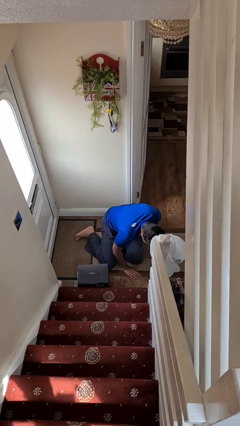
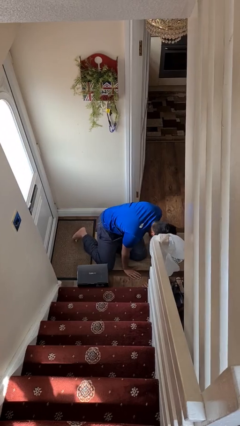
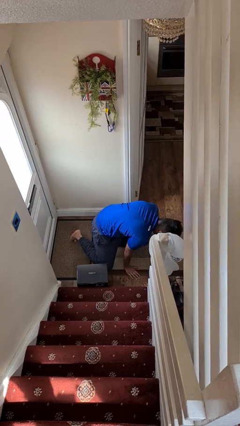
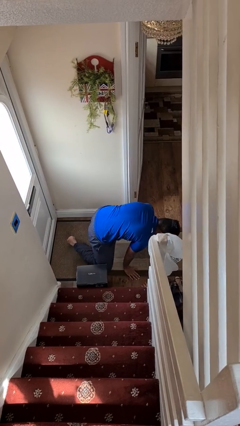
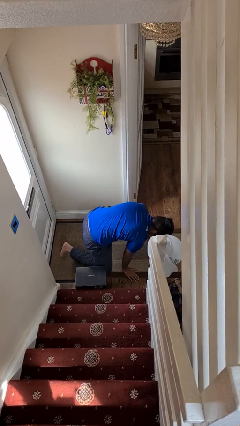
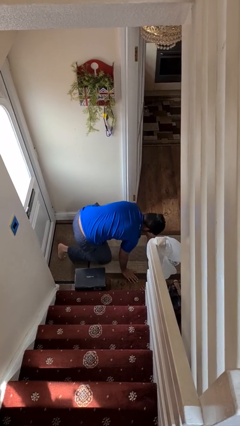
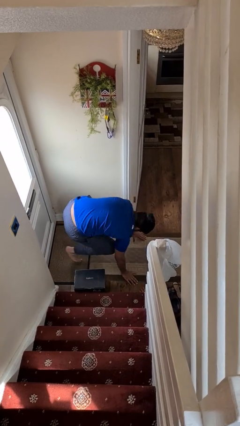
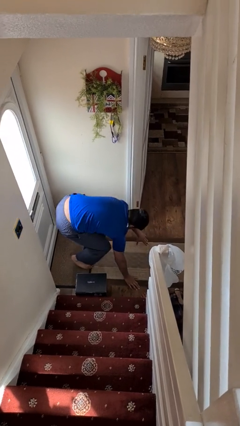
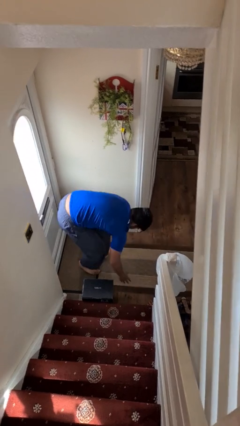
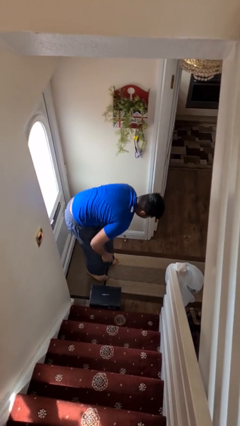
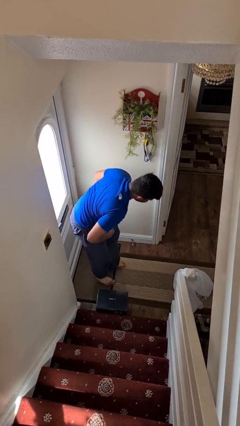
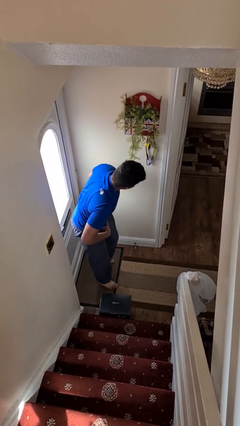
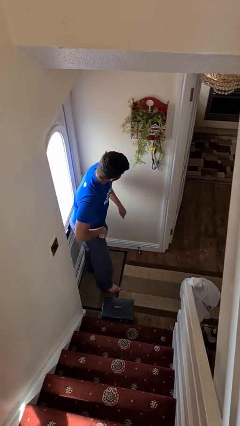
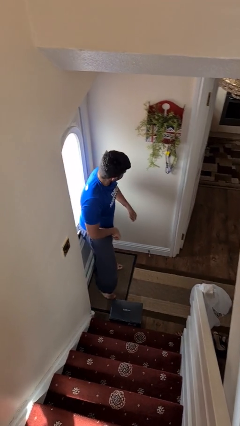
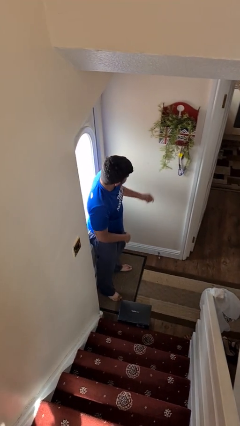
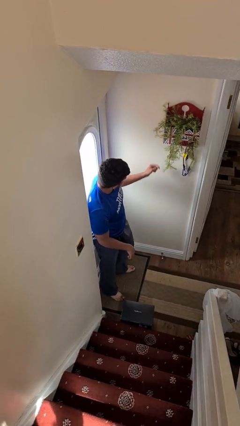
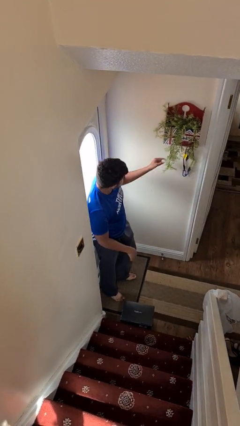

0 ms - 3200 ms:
person stands up from floor

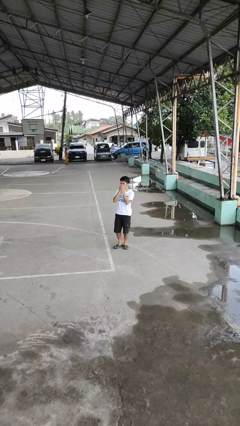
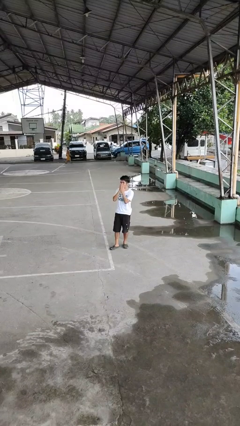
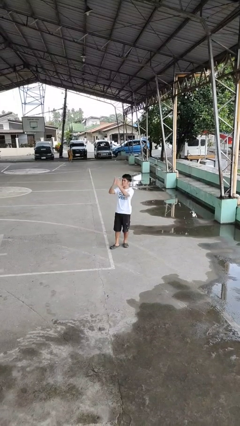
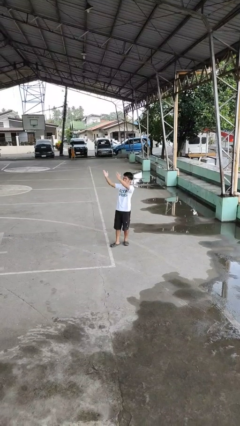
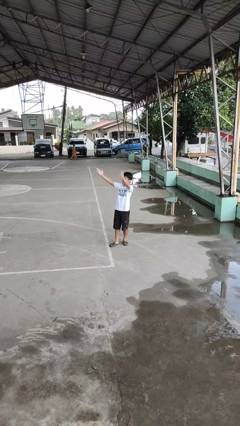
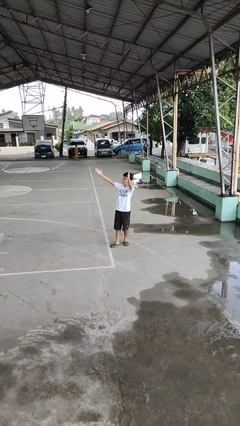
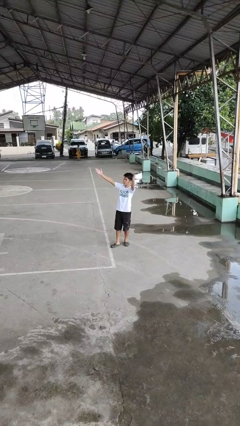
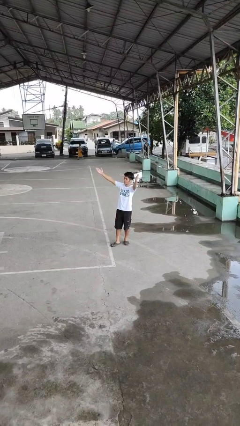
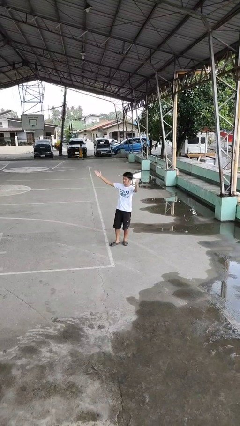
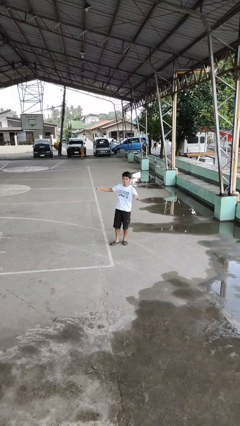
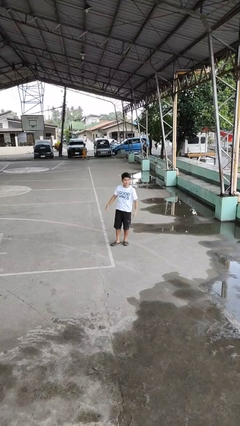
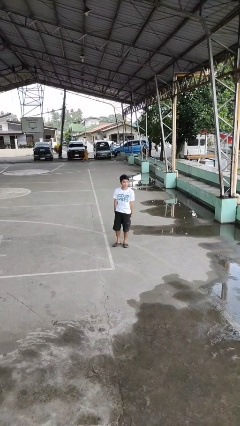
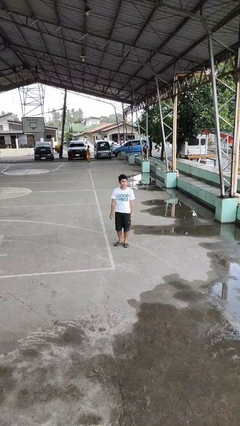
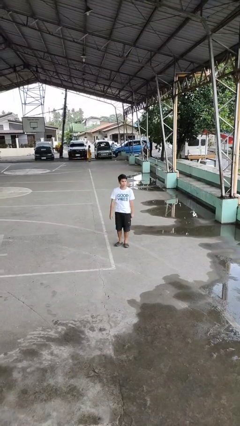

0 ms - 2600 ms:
person gestures blow kiss

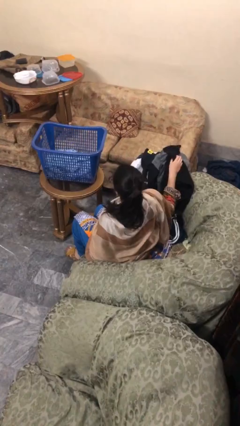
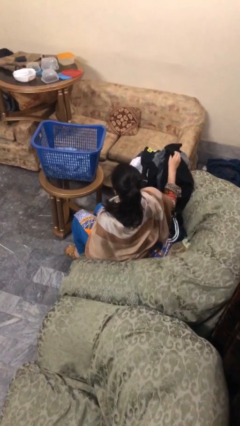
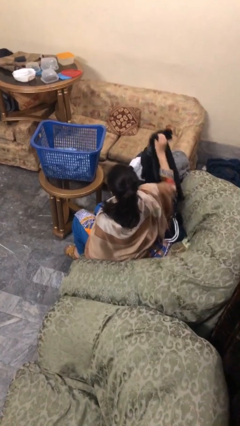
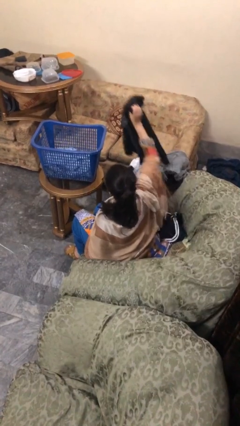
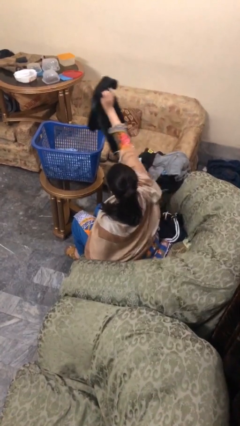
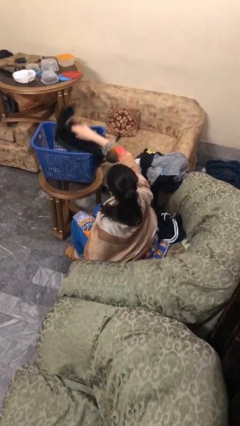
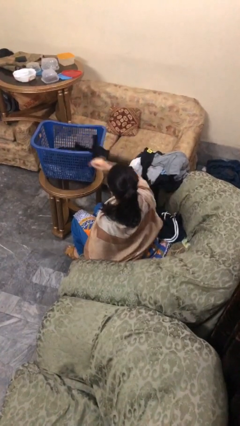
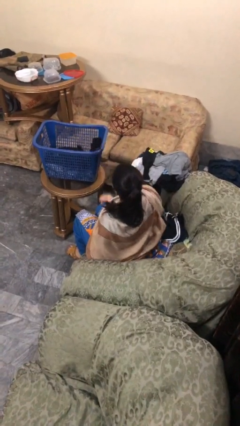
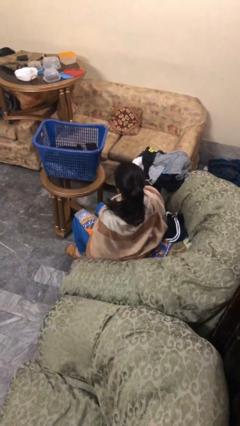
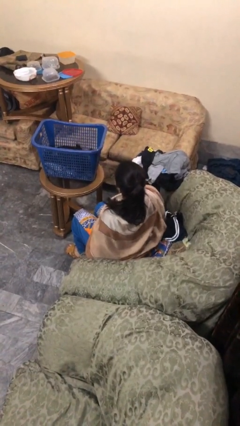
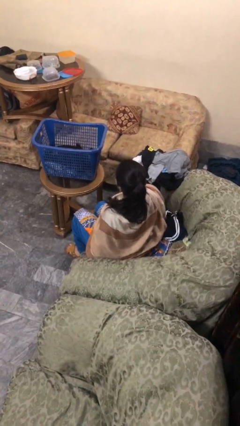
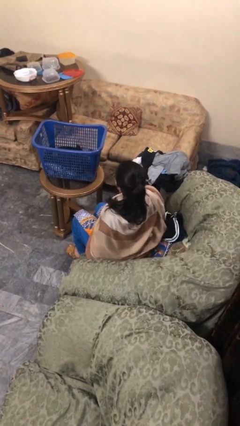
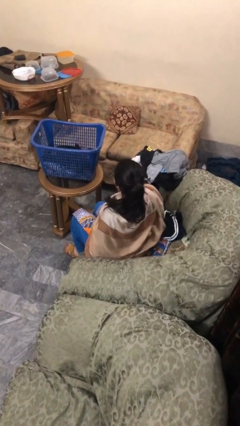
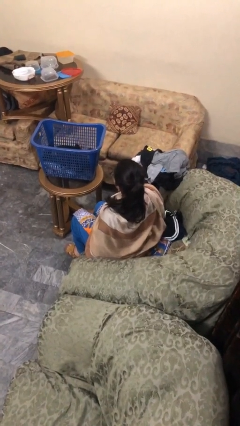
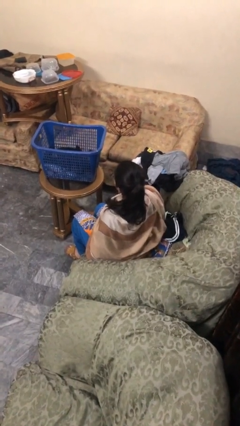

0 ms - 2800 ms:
person puts object into basket

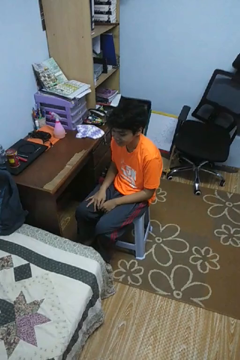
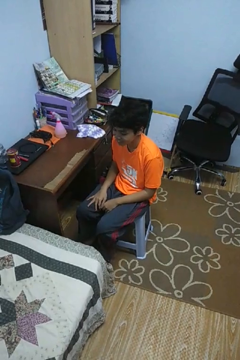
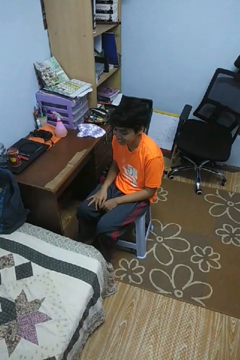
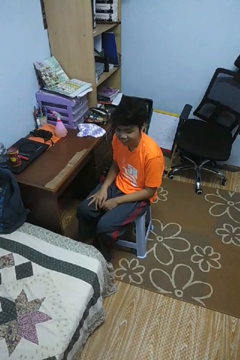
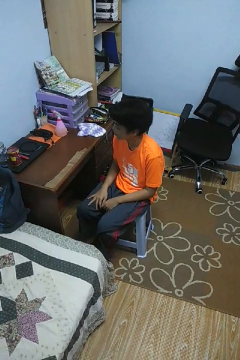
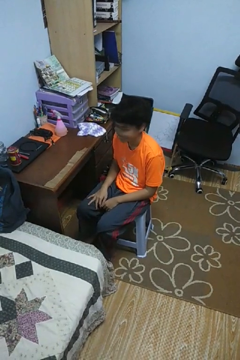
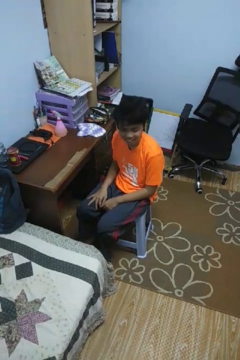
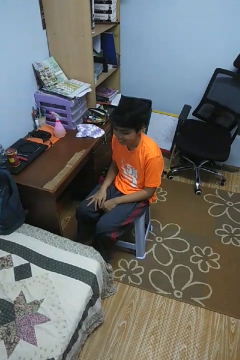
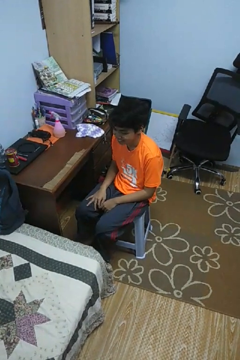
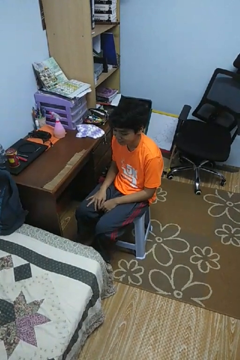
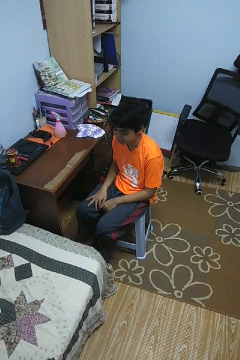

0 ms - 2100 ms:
person shakes head

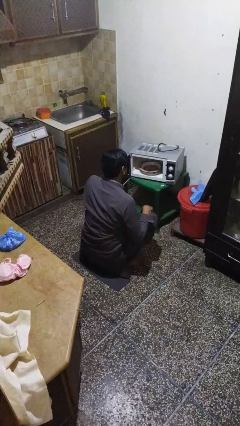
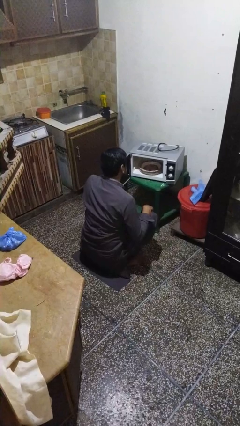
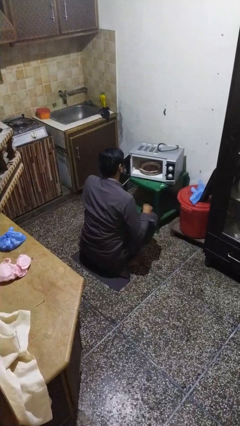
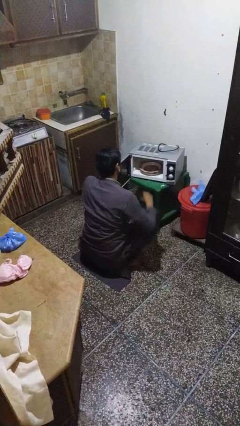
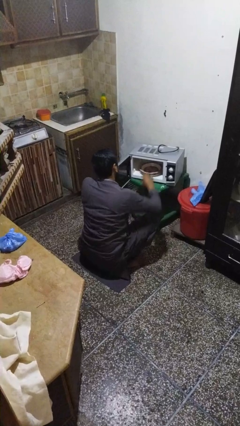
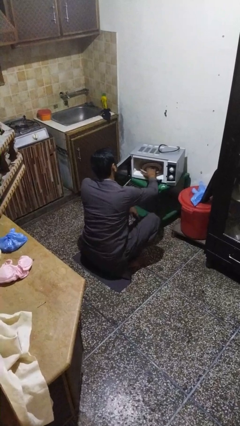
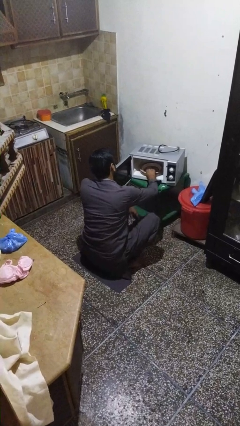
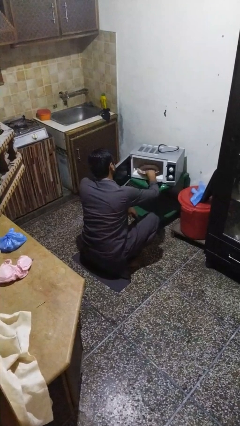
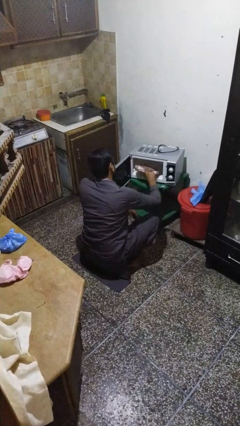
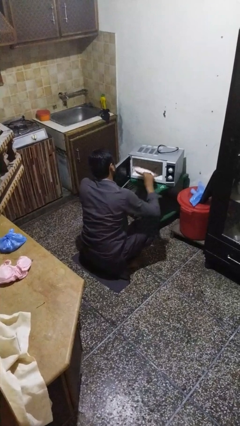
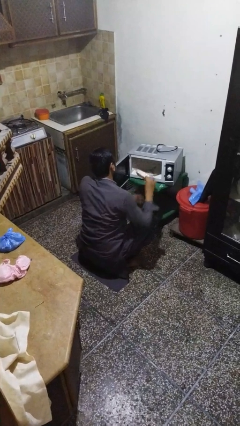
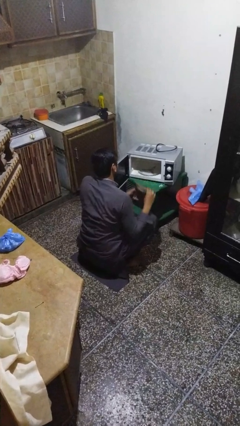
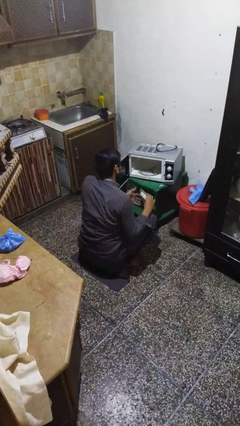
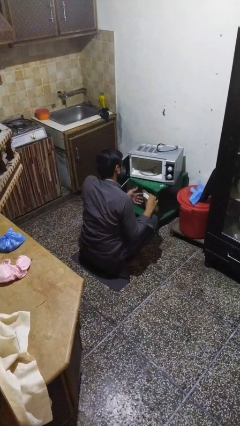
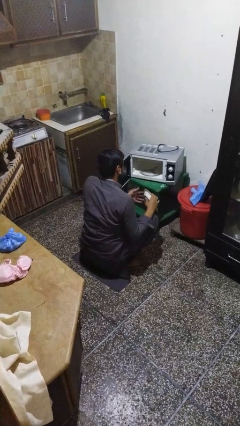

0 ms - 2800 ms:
person takes object from microwave

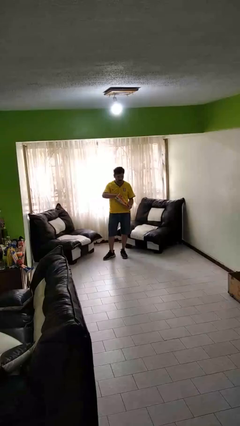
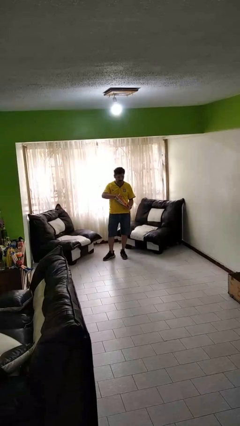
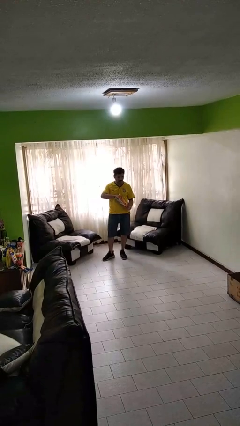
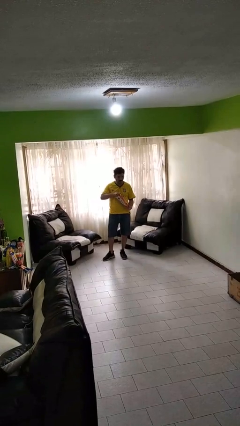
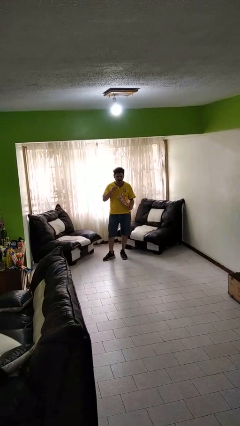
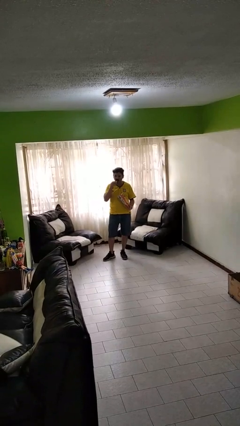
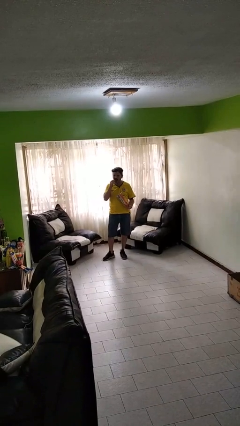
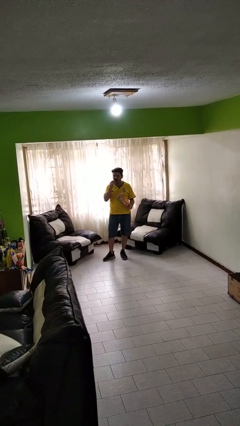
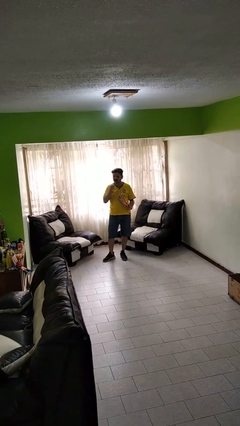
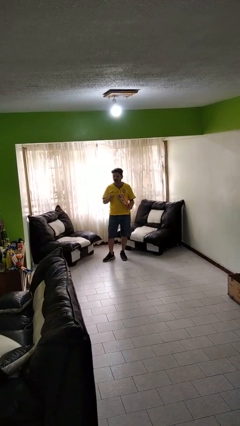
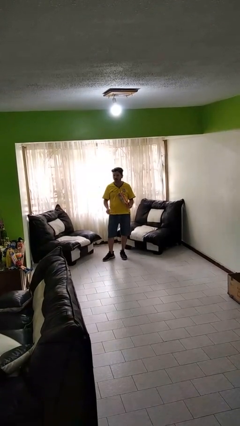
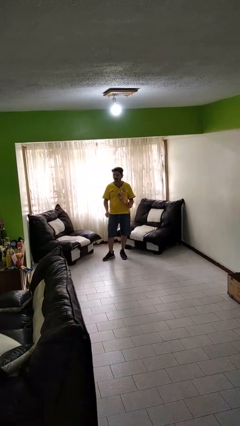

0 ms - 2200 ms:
person eats snack from bag

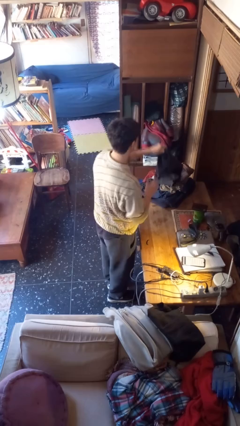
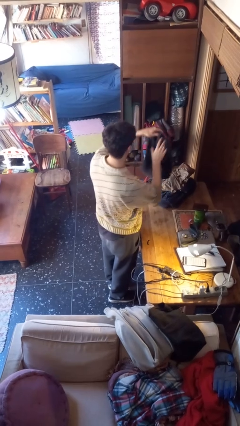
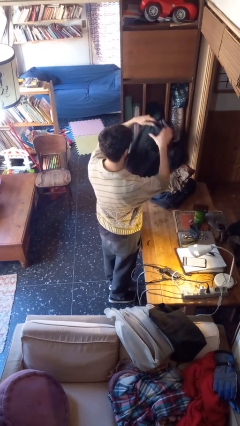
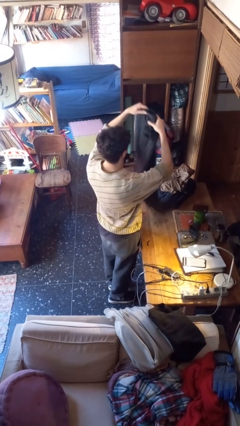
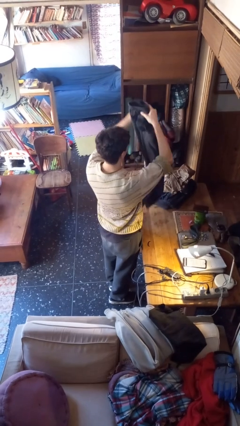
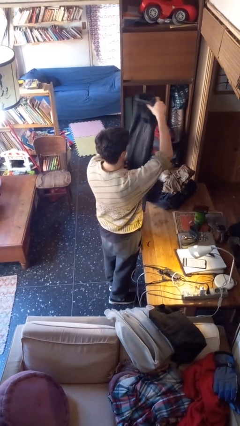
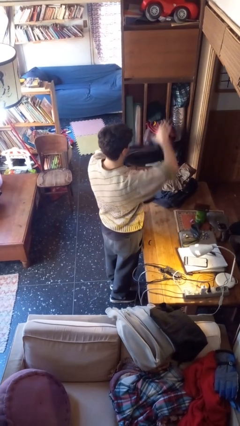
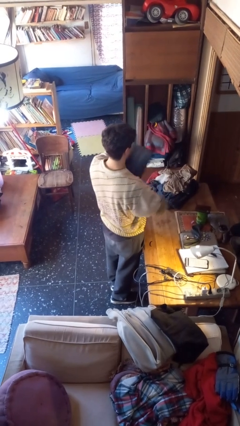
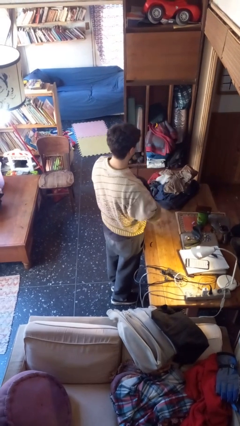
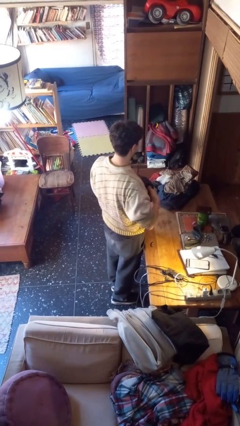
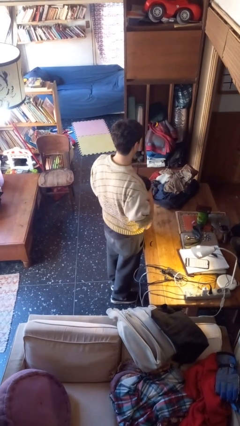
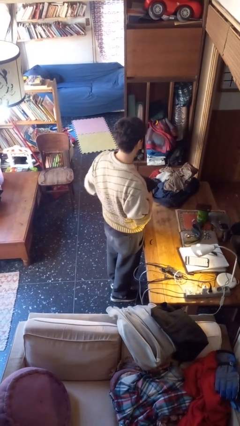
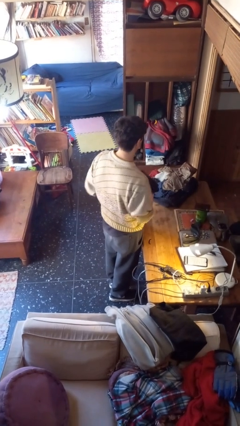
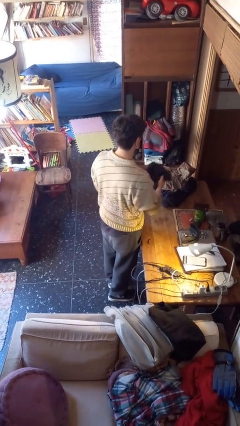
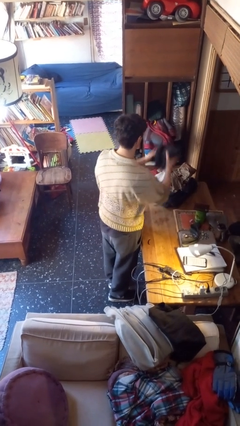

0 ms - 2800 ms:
person folds pants
